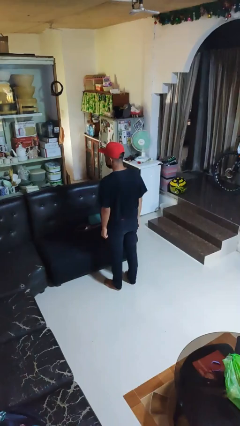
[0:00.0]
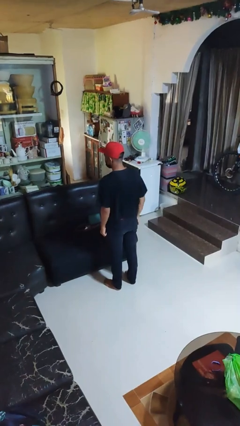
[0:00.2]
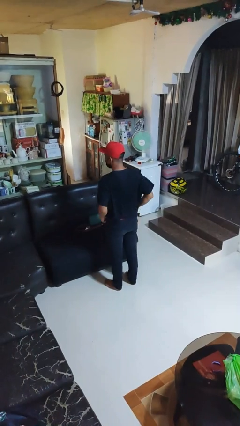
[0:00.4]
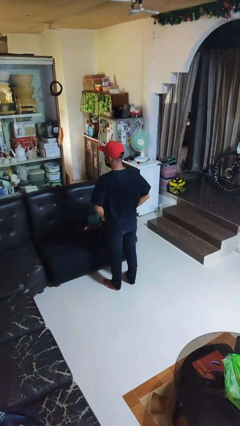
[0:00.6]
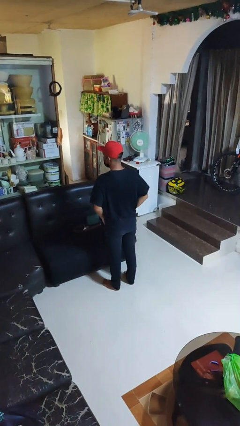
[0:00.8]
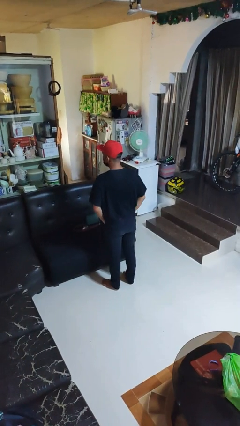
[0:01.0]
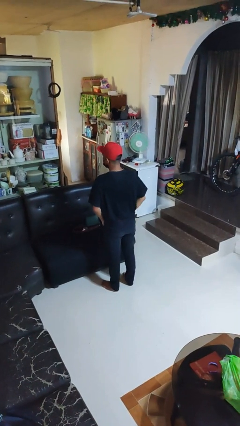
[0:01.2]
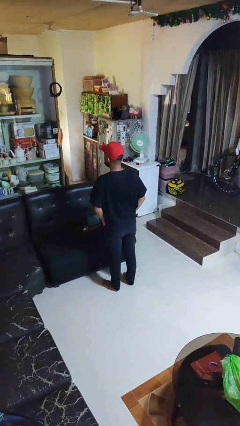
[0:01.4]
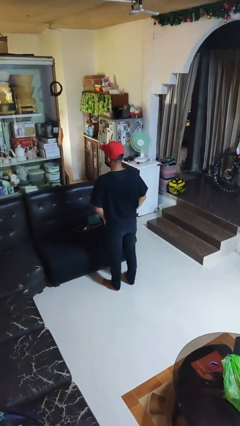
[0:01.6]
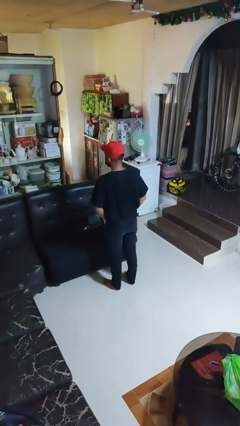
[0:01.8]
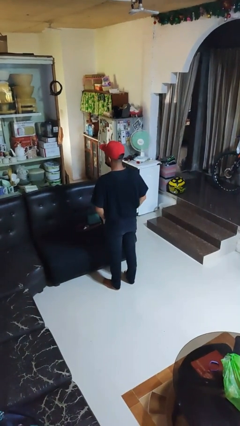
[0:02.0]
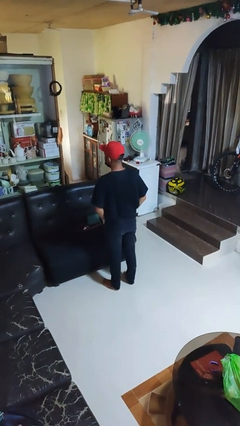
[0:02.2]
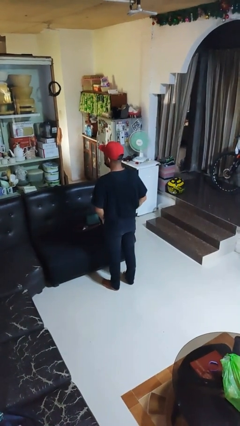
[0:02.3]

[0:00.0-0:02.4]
person puts hands in back pockets

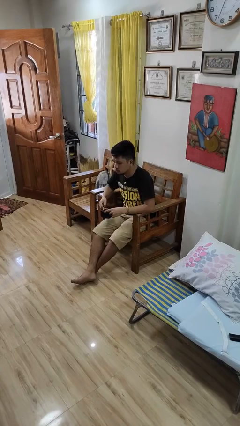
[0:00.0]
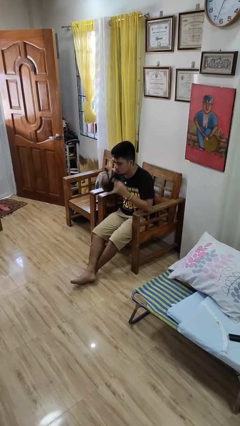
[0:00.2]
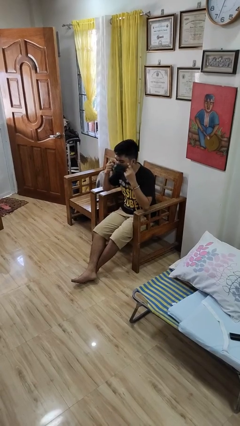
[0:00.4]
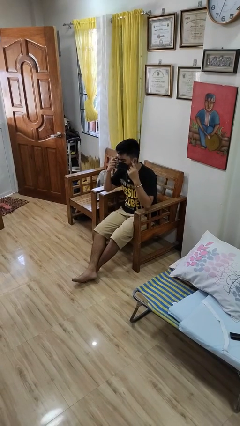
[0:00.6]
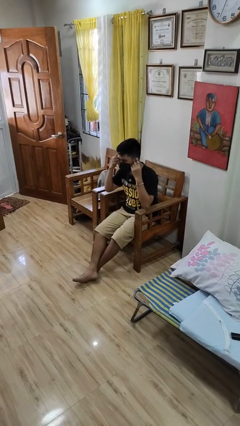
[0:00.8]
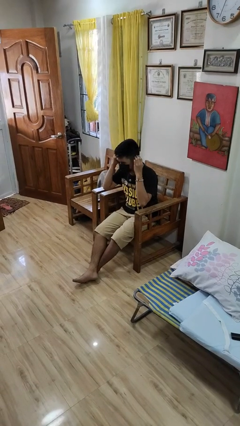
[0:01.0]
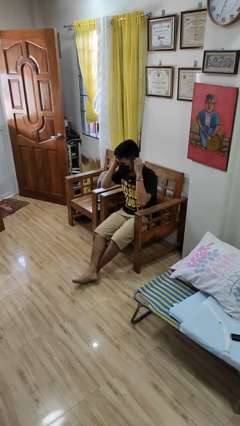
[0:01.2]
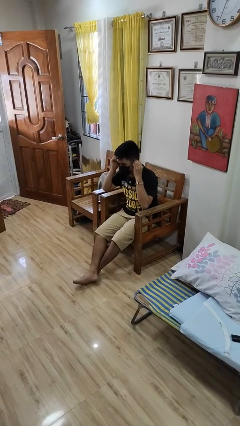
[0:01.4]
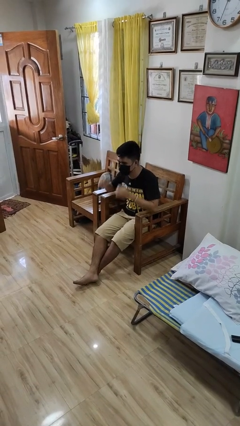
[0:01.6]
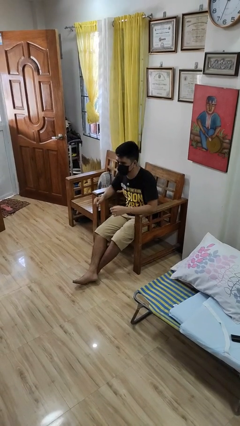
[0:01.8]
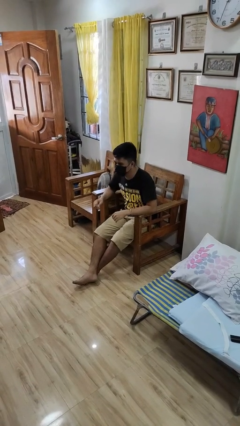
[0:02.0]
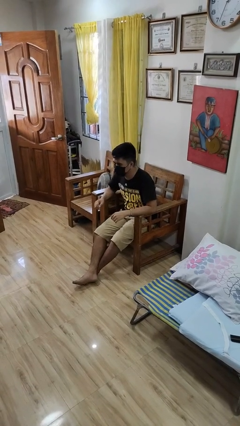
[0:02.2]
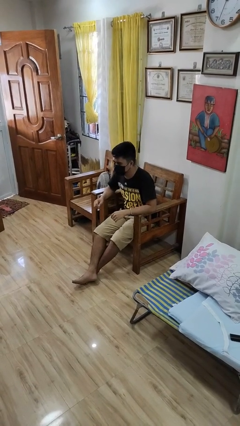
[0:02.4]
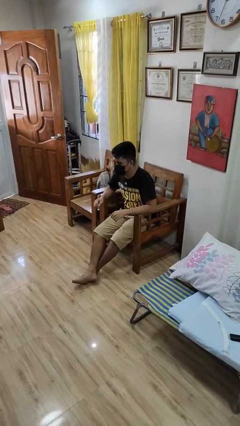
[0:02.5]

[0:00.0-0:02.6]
person puts on facemask

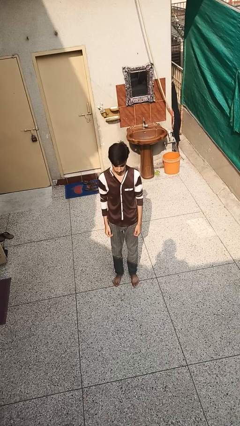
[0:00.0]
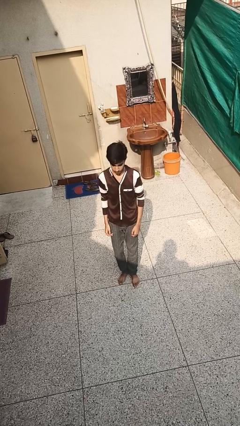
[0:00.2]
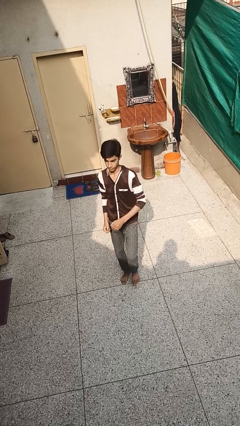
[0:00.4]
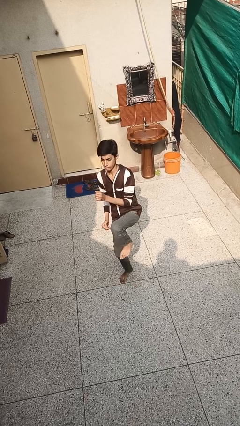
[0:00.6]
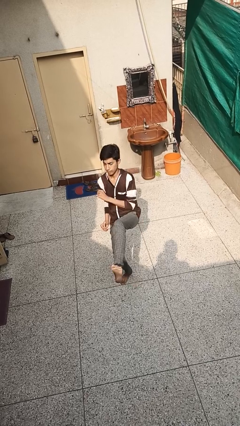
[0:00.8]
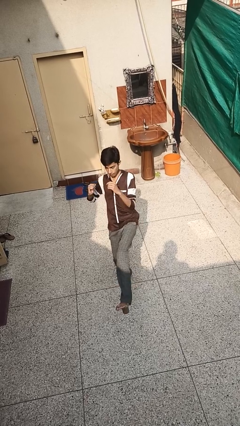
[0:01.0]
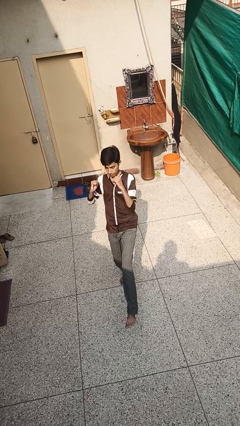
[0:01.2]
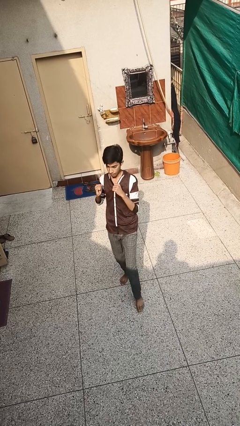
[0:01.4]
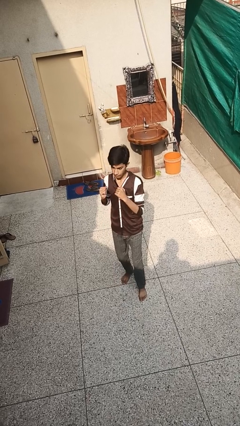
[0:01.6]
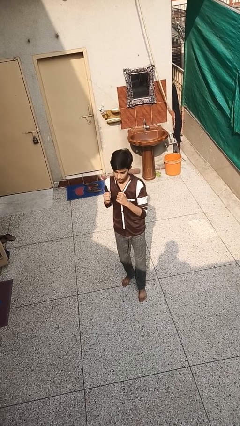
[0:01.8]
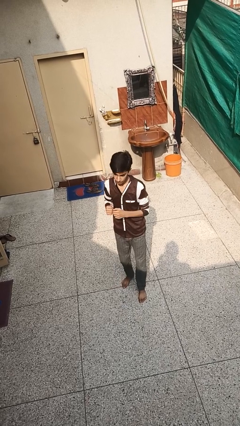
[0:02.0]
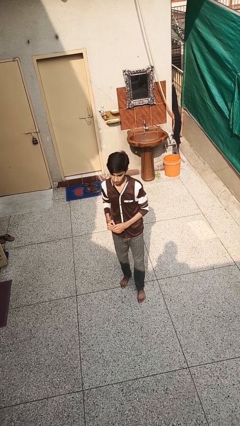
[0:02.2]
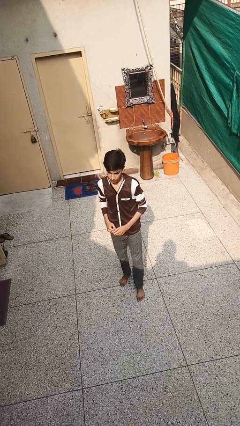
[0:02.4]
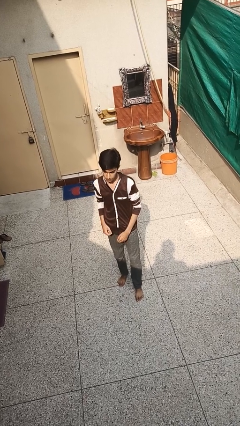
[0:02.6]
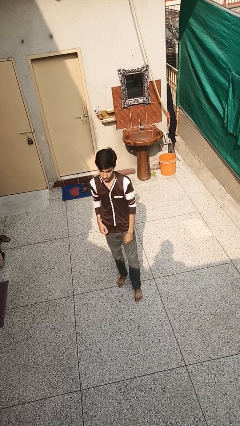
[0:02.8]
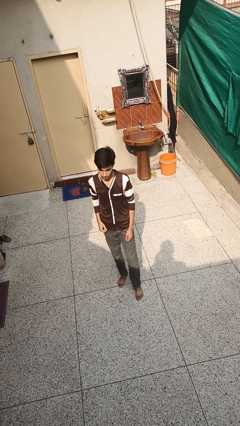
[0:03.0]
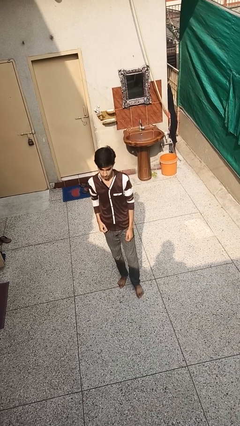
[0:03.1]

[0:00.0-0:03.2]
person karate kicks

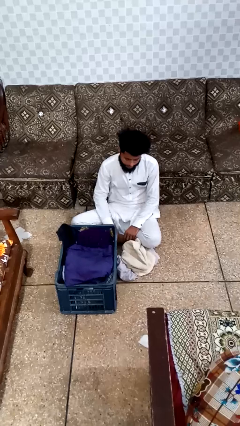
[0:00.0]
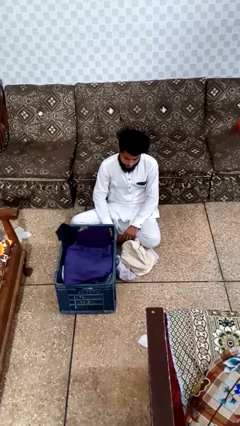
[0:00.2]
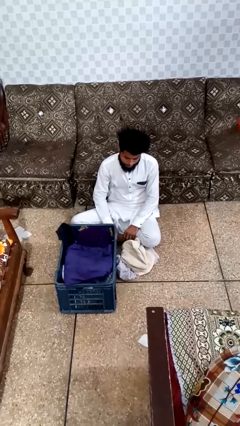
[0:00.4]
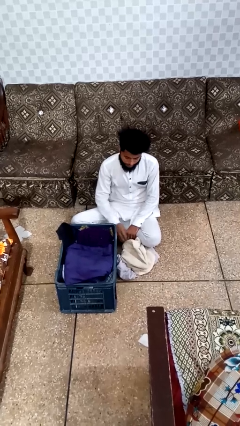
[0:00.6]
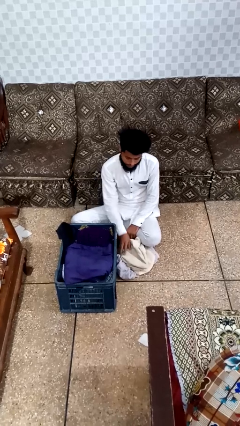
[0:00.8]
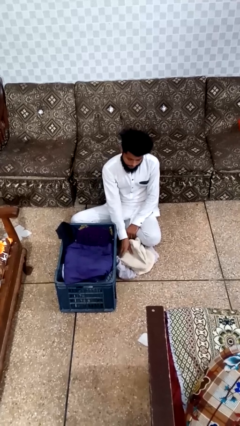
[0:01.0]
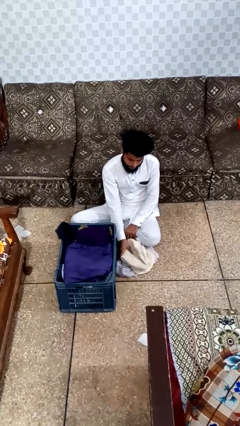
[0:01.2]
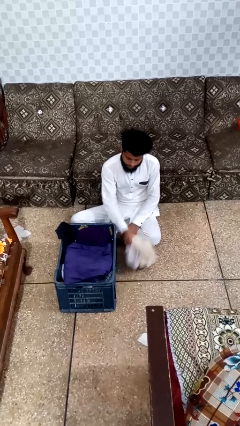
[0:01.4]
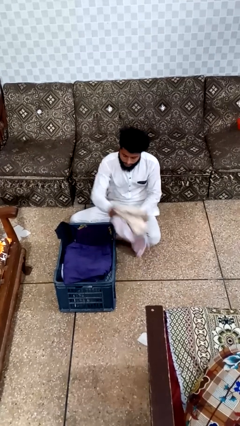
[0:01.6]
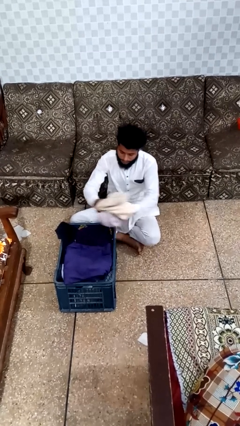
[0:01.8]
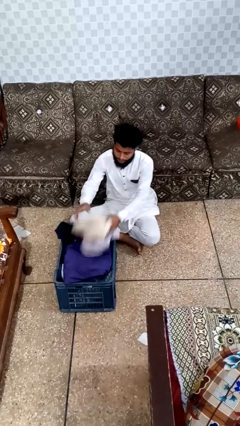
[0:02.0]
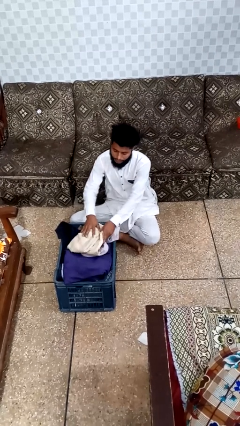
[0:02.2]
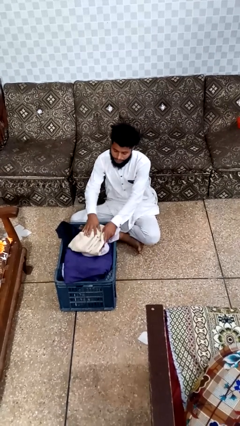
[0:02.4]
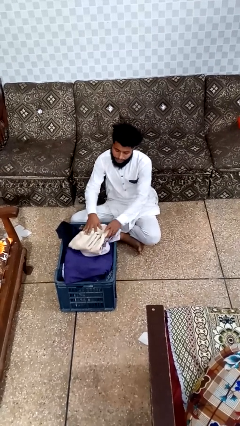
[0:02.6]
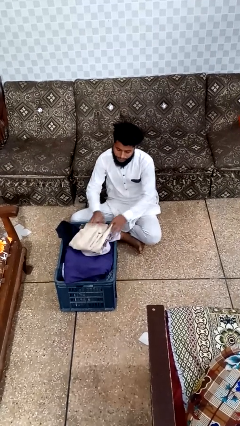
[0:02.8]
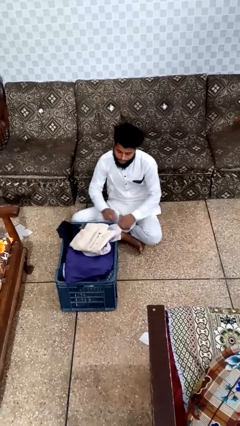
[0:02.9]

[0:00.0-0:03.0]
person takes object from basket

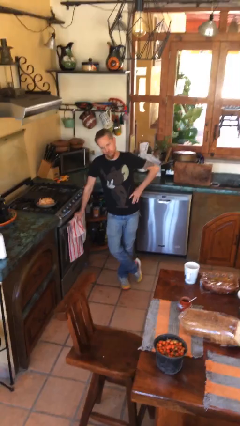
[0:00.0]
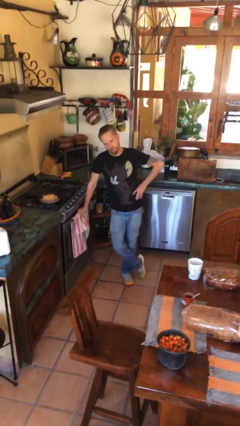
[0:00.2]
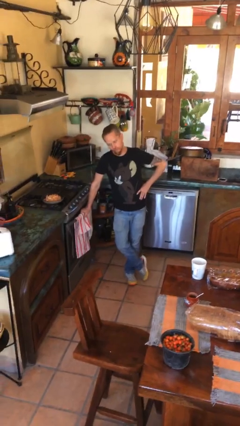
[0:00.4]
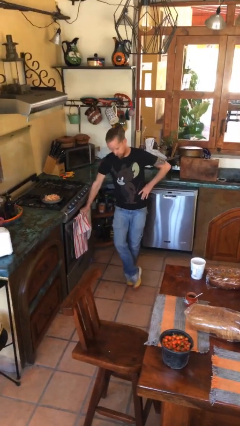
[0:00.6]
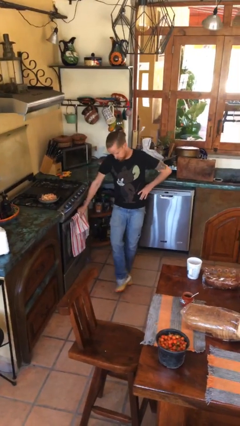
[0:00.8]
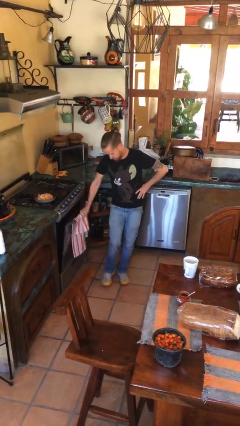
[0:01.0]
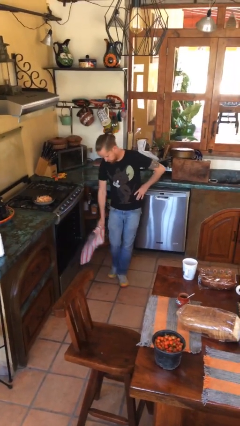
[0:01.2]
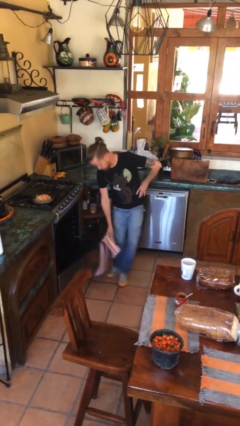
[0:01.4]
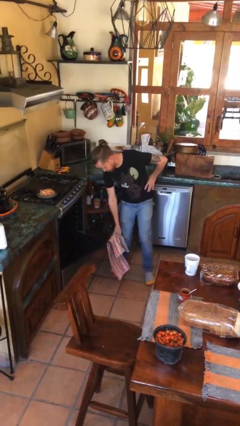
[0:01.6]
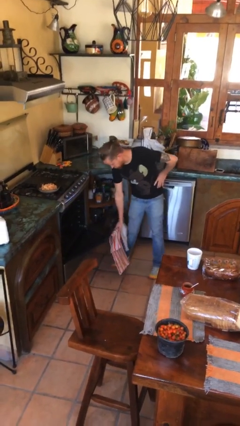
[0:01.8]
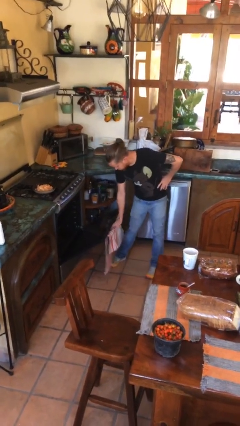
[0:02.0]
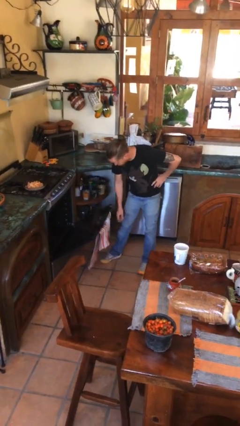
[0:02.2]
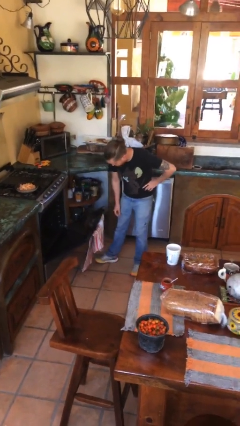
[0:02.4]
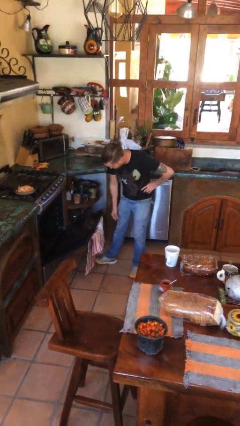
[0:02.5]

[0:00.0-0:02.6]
person opens oven door

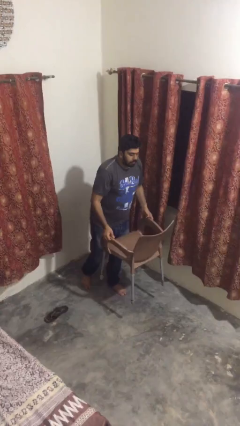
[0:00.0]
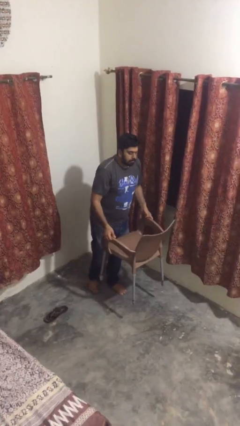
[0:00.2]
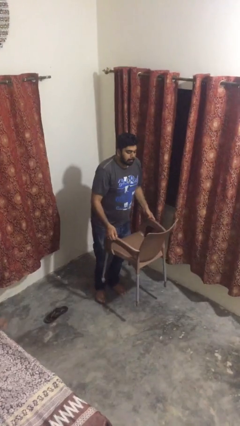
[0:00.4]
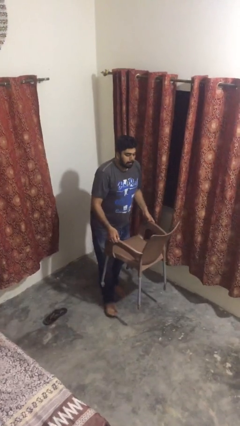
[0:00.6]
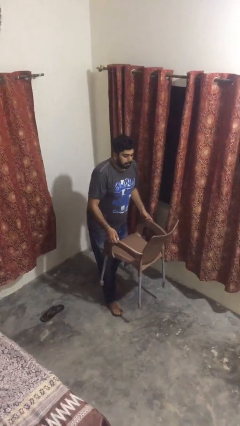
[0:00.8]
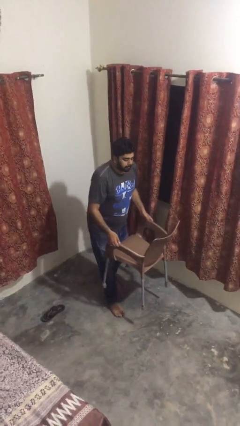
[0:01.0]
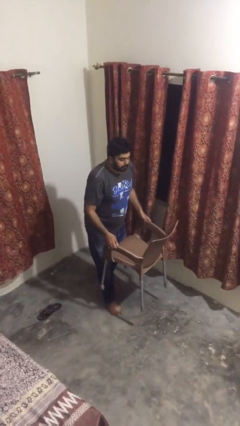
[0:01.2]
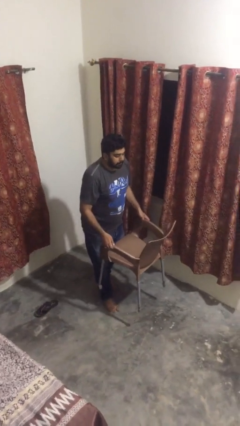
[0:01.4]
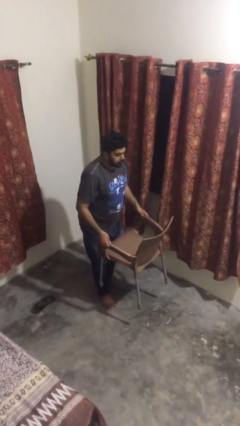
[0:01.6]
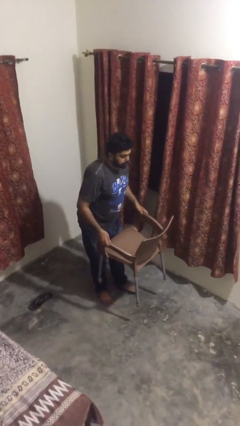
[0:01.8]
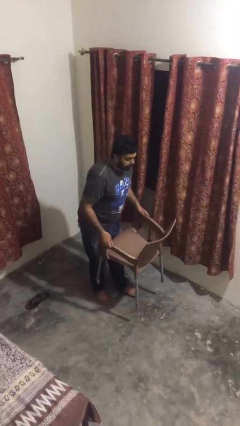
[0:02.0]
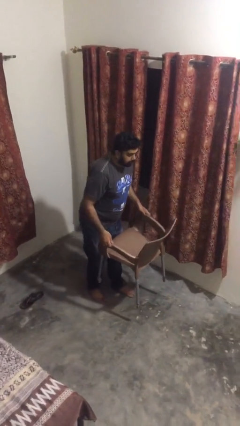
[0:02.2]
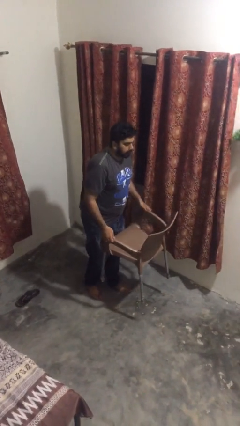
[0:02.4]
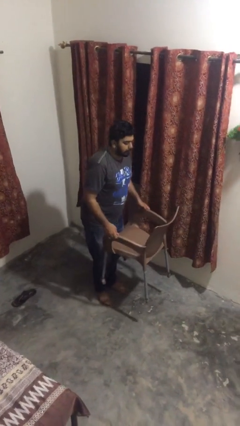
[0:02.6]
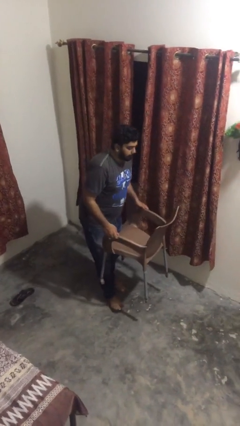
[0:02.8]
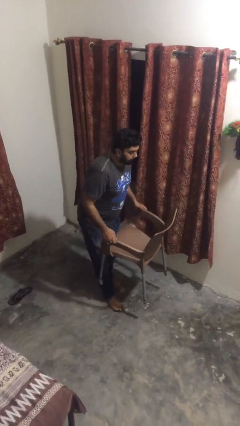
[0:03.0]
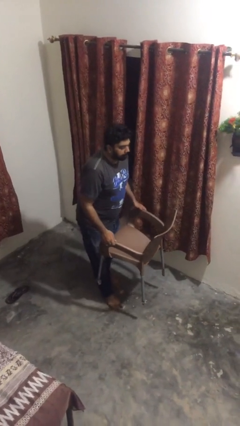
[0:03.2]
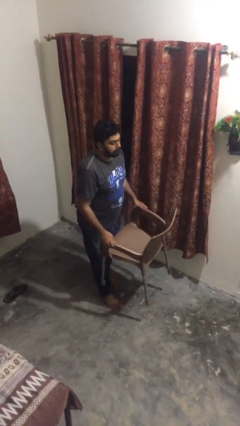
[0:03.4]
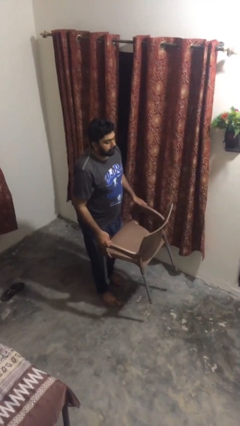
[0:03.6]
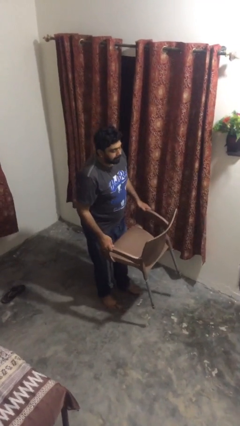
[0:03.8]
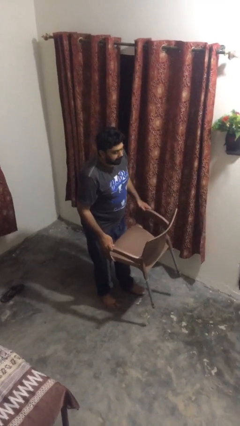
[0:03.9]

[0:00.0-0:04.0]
person carries heavy object
